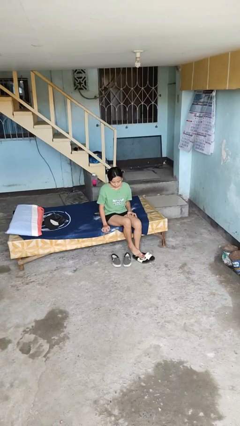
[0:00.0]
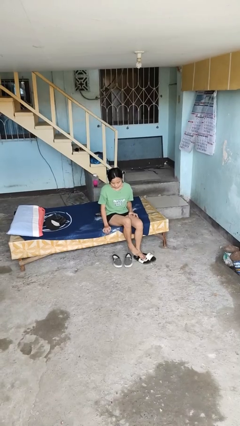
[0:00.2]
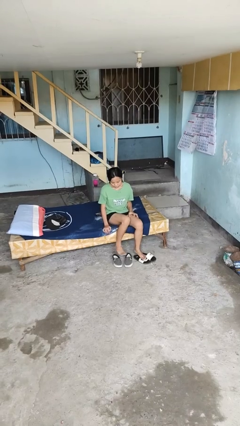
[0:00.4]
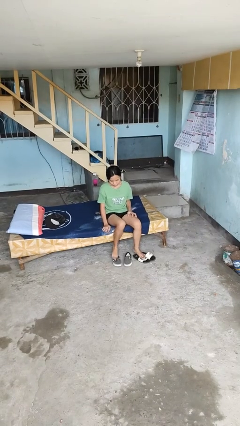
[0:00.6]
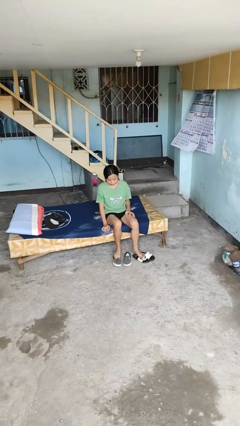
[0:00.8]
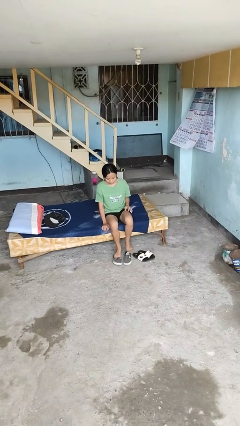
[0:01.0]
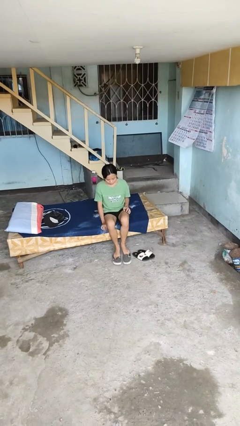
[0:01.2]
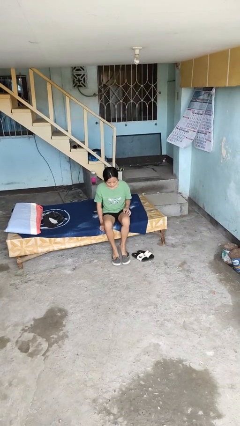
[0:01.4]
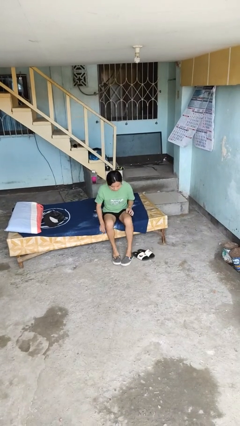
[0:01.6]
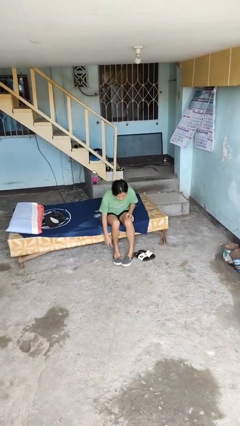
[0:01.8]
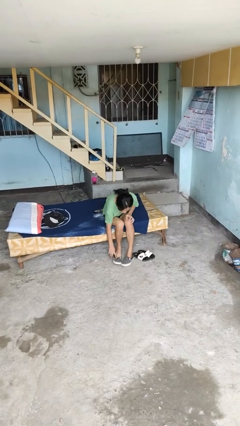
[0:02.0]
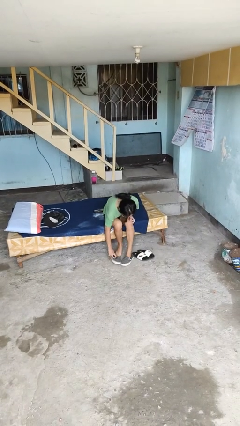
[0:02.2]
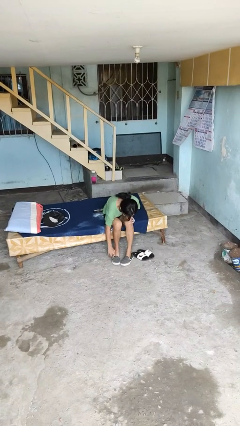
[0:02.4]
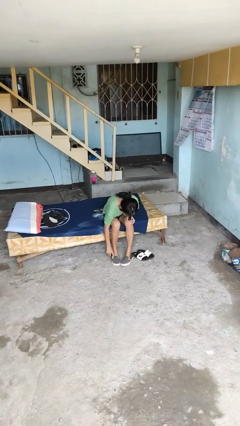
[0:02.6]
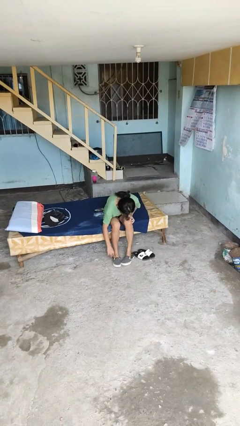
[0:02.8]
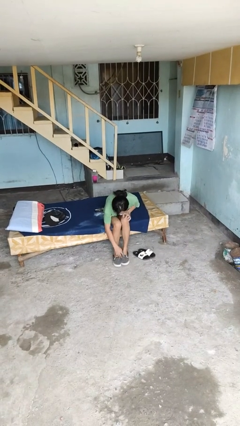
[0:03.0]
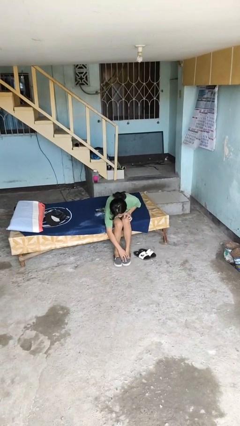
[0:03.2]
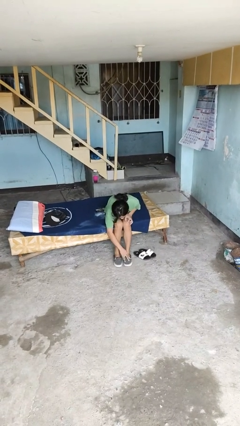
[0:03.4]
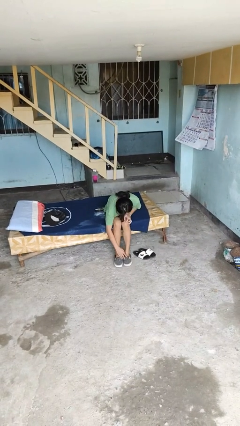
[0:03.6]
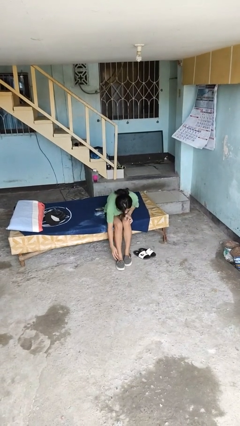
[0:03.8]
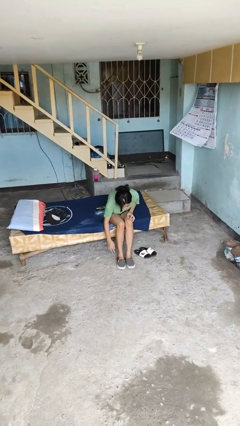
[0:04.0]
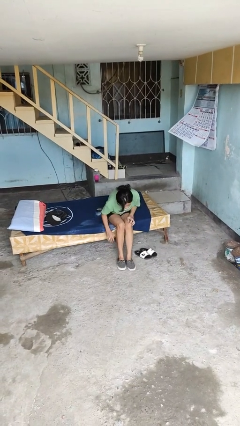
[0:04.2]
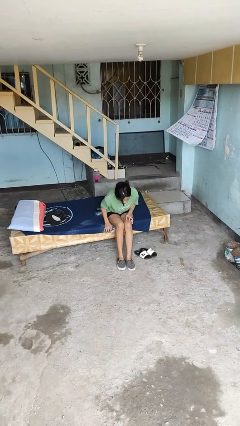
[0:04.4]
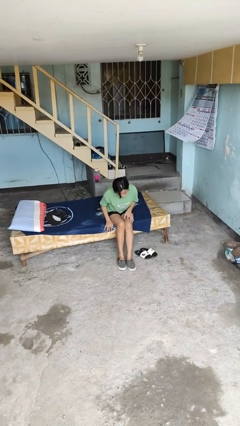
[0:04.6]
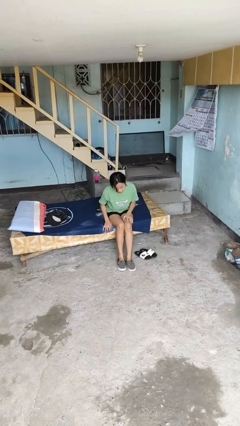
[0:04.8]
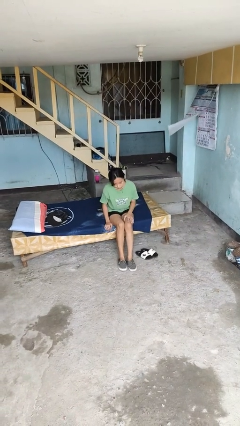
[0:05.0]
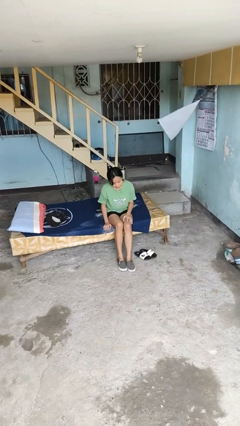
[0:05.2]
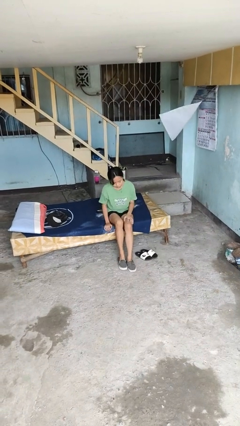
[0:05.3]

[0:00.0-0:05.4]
person puts on shoes

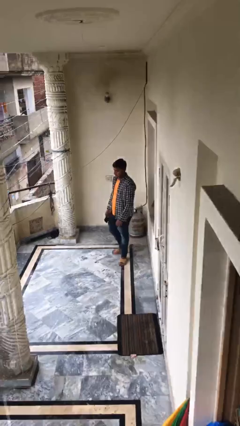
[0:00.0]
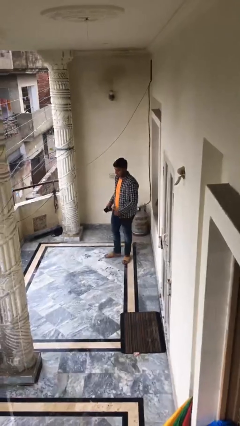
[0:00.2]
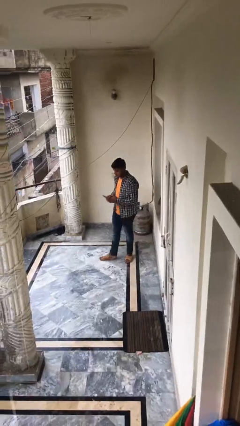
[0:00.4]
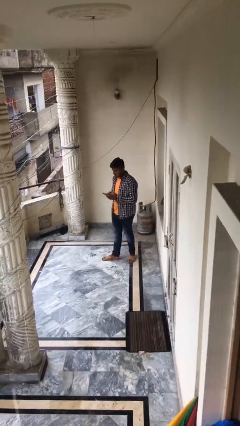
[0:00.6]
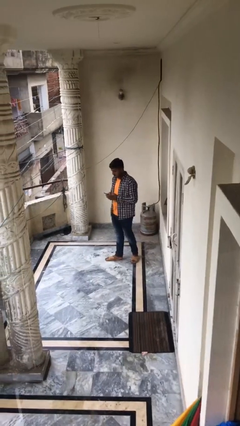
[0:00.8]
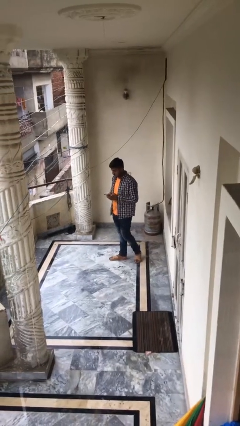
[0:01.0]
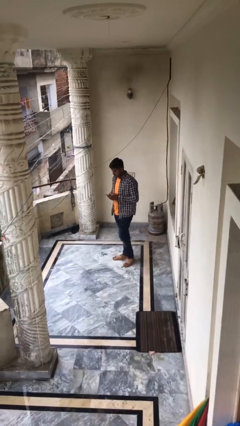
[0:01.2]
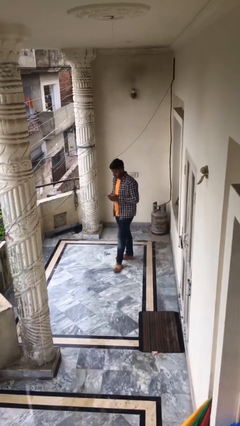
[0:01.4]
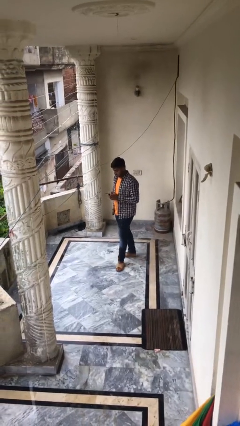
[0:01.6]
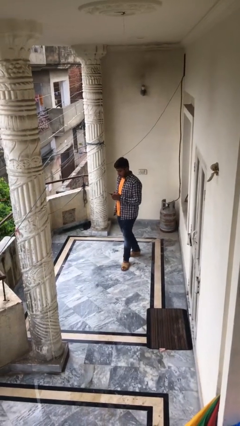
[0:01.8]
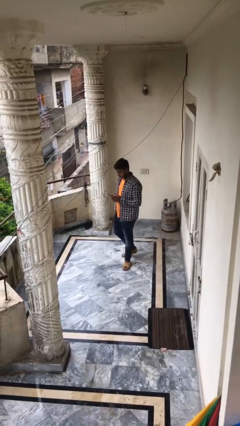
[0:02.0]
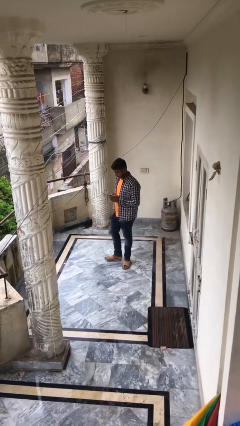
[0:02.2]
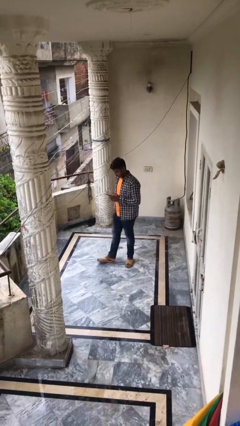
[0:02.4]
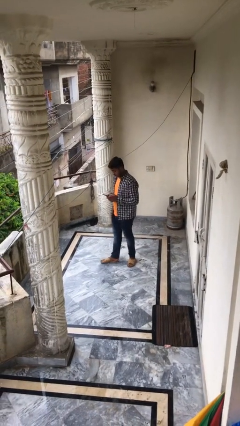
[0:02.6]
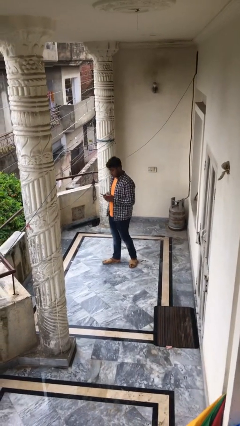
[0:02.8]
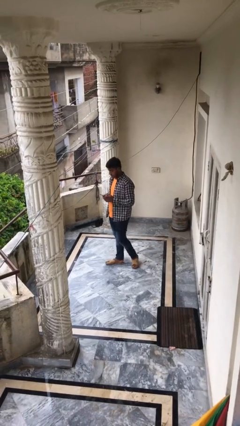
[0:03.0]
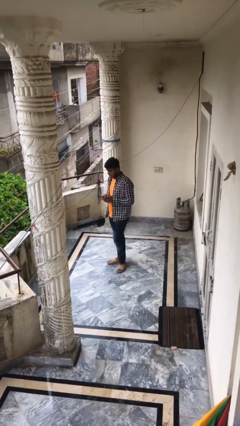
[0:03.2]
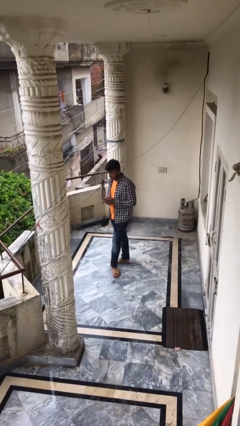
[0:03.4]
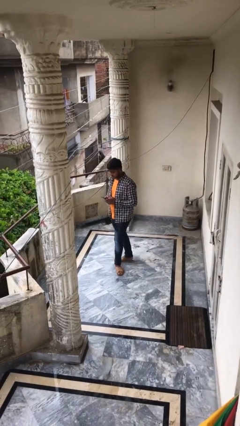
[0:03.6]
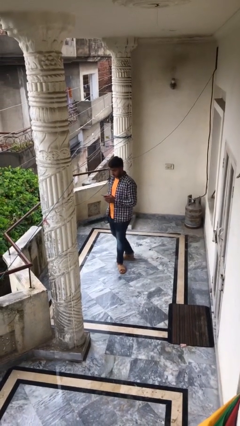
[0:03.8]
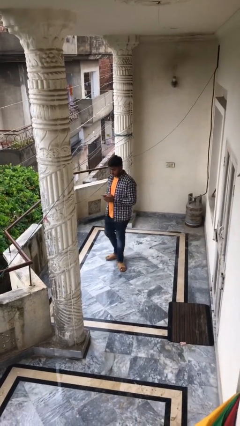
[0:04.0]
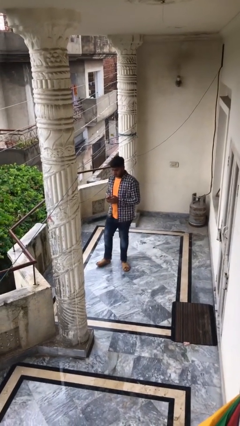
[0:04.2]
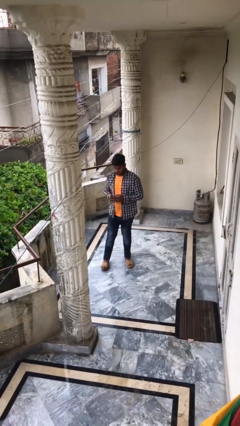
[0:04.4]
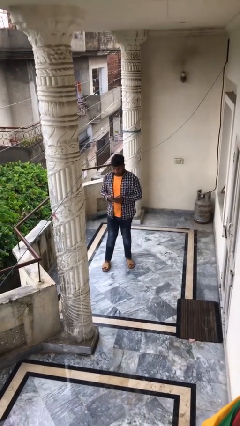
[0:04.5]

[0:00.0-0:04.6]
person texts on phone

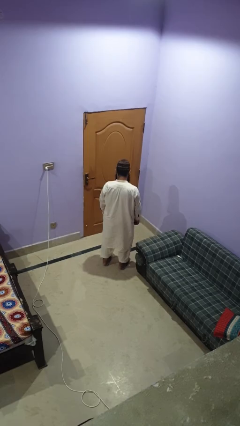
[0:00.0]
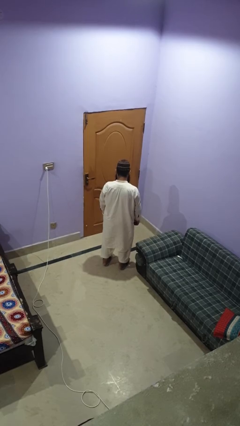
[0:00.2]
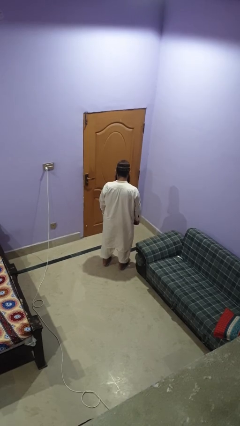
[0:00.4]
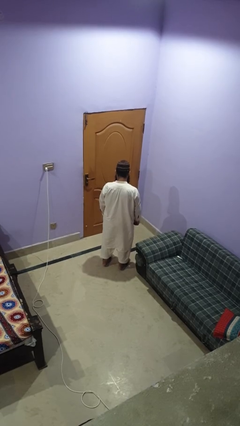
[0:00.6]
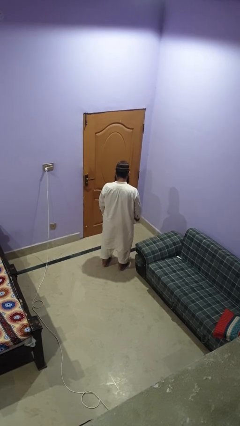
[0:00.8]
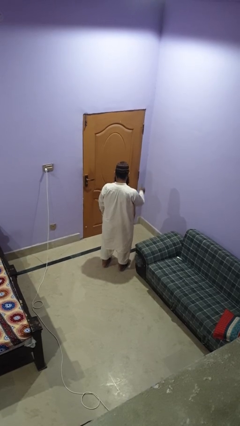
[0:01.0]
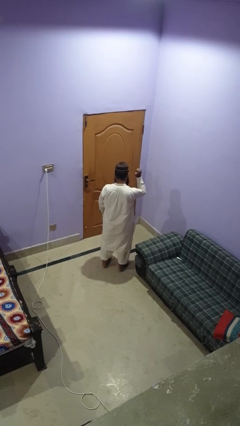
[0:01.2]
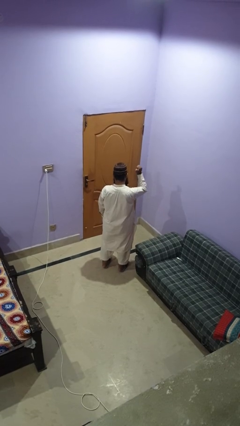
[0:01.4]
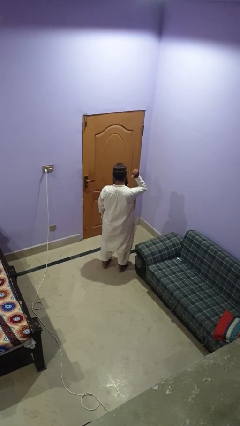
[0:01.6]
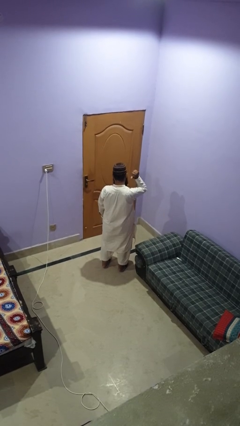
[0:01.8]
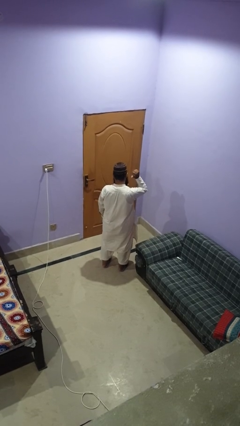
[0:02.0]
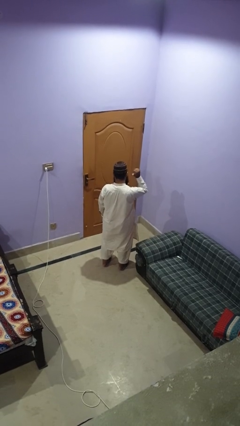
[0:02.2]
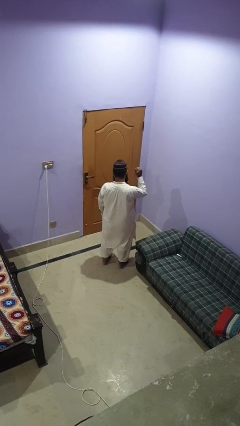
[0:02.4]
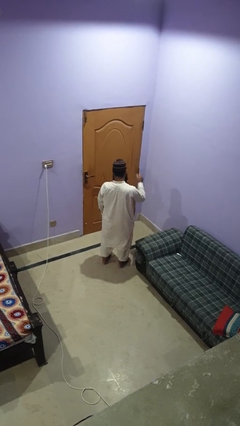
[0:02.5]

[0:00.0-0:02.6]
person gestures behind me

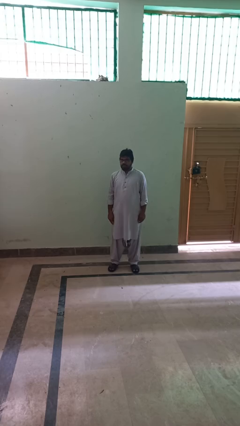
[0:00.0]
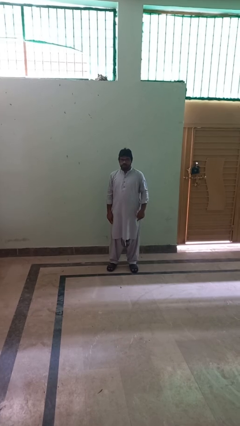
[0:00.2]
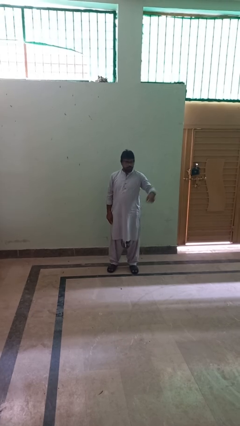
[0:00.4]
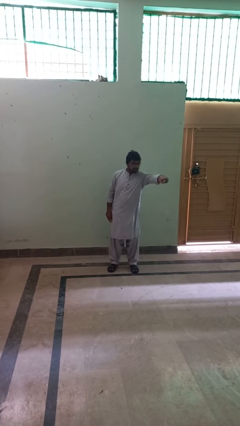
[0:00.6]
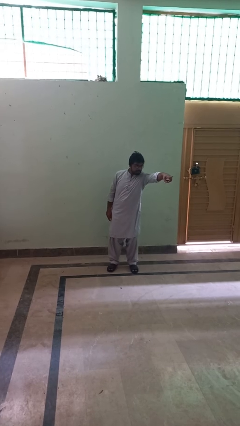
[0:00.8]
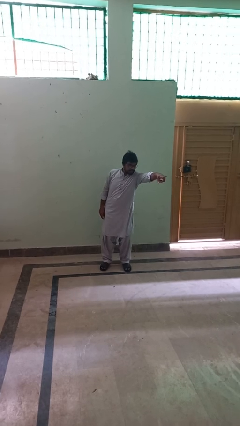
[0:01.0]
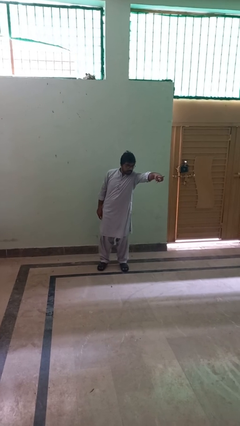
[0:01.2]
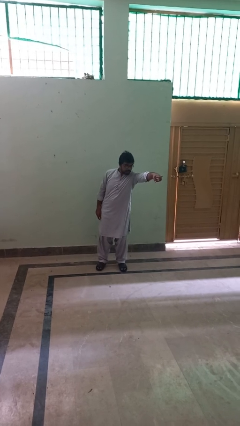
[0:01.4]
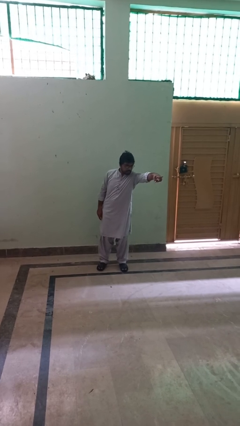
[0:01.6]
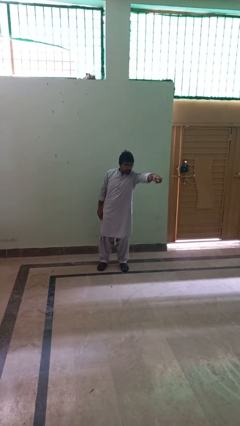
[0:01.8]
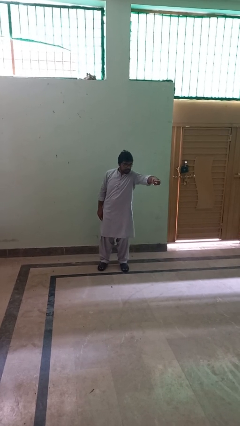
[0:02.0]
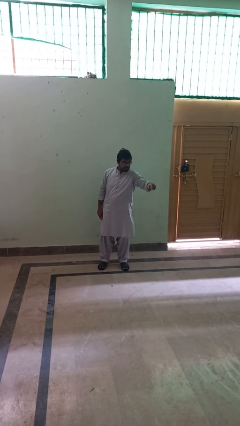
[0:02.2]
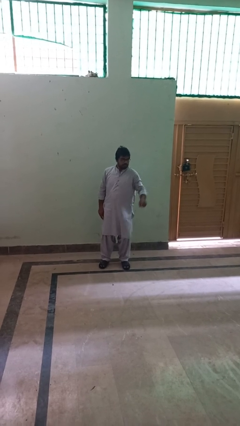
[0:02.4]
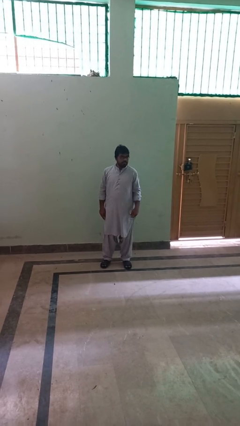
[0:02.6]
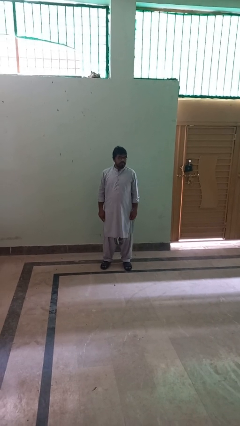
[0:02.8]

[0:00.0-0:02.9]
person points at person

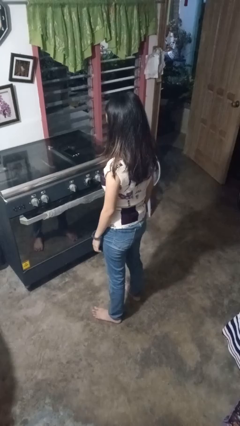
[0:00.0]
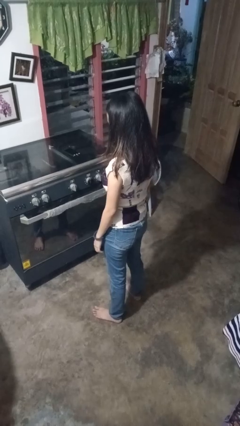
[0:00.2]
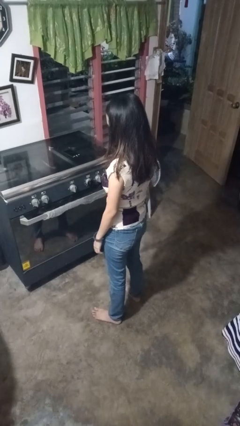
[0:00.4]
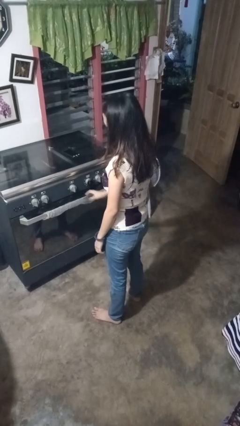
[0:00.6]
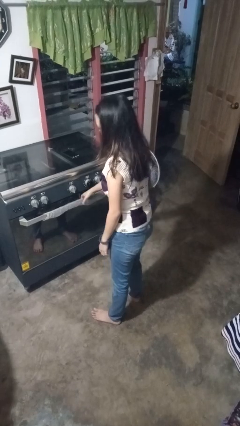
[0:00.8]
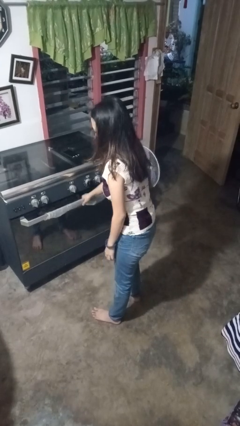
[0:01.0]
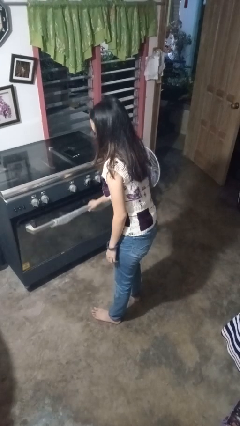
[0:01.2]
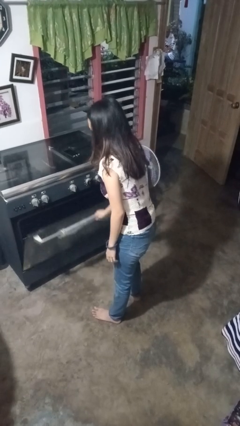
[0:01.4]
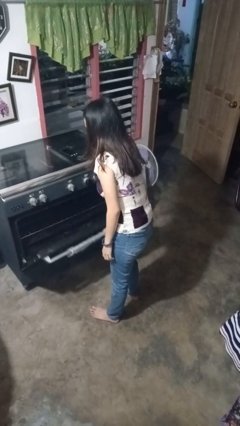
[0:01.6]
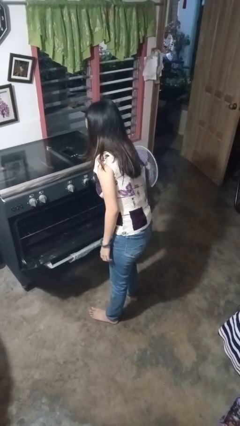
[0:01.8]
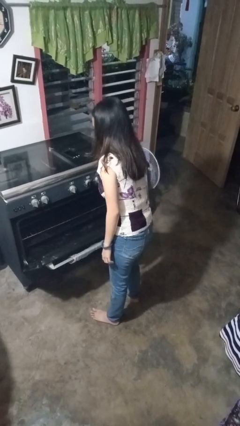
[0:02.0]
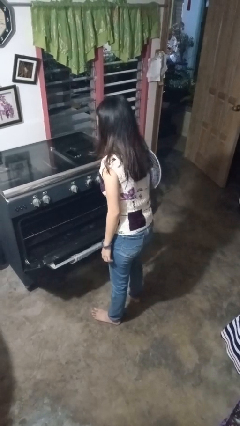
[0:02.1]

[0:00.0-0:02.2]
person opens oven door
